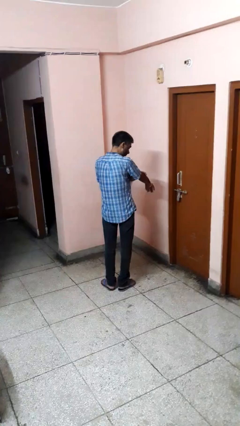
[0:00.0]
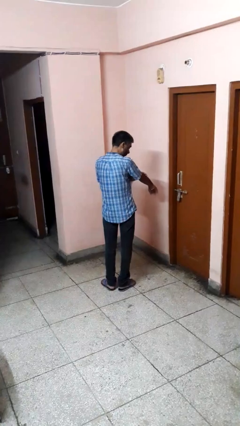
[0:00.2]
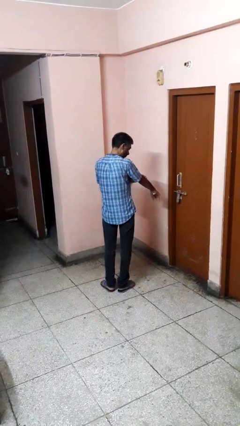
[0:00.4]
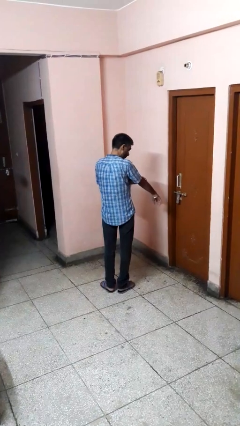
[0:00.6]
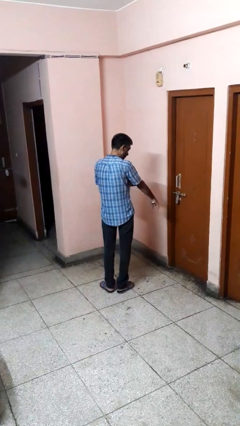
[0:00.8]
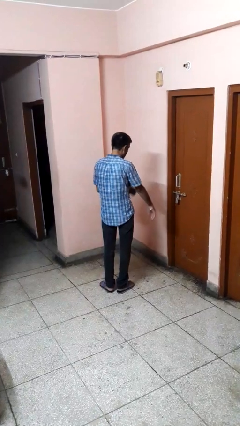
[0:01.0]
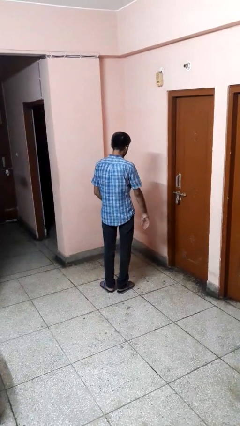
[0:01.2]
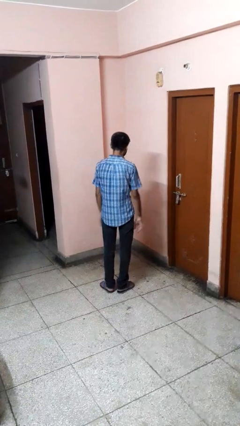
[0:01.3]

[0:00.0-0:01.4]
person swats bug

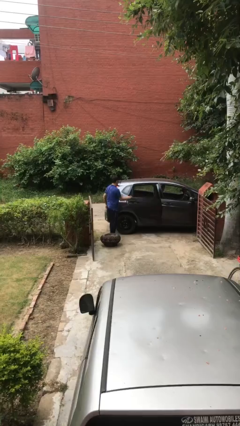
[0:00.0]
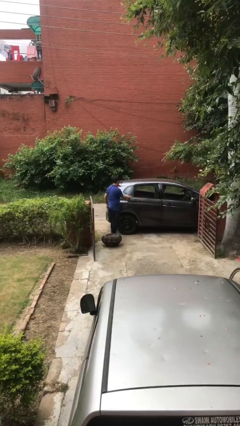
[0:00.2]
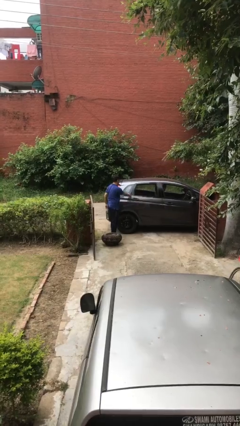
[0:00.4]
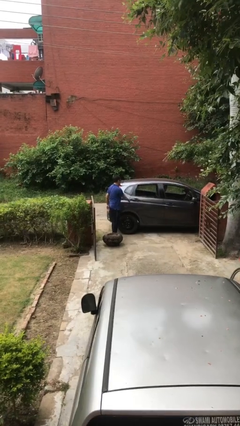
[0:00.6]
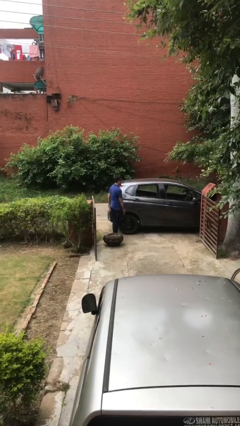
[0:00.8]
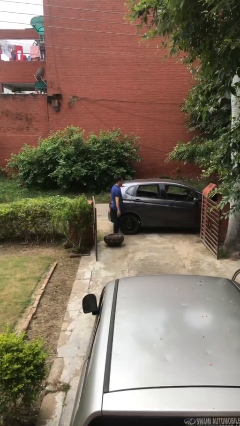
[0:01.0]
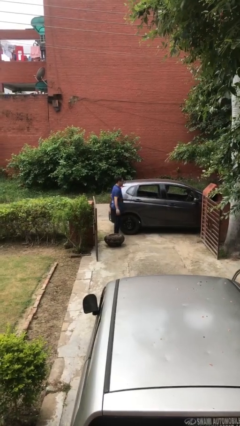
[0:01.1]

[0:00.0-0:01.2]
person closes car door

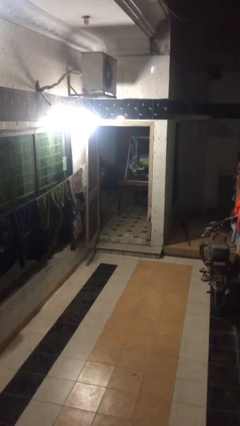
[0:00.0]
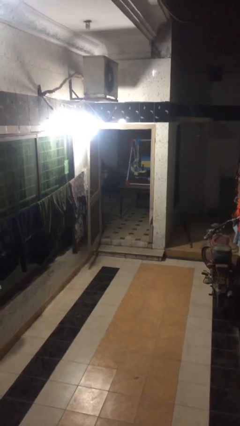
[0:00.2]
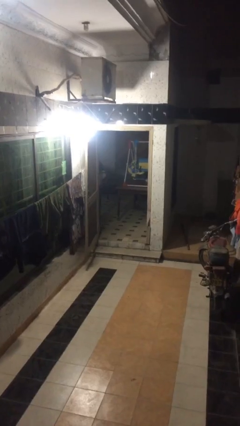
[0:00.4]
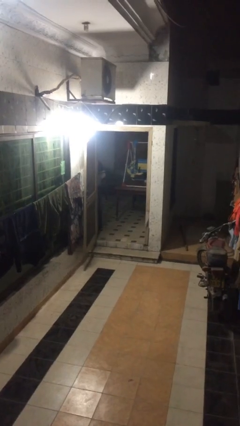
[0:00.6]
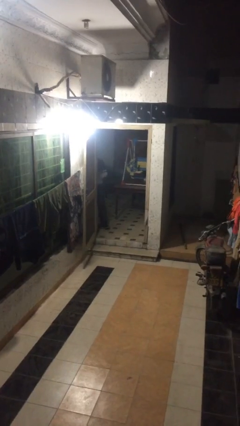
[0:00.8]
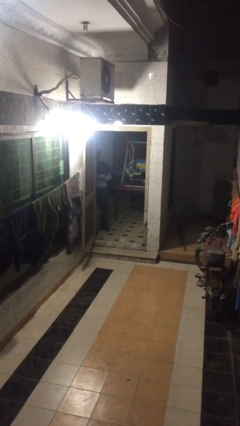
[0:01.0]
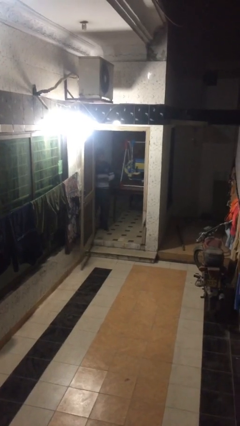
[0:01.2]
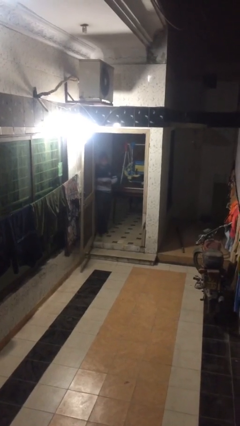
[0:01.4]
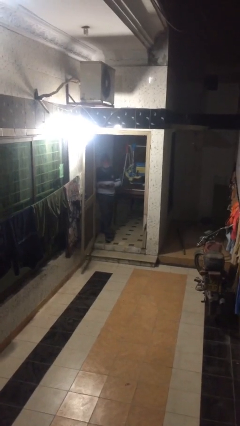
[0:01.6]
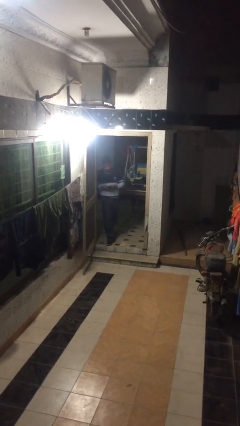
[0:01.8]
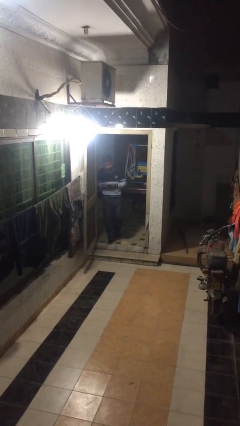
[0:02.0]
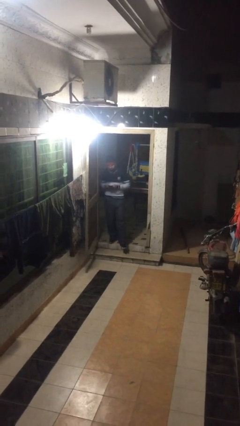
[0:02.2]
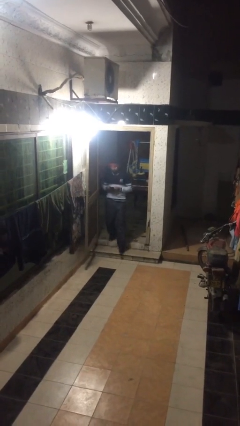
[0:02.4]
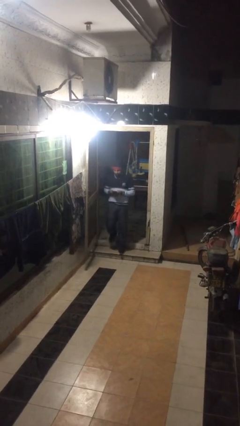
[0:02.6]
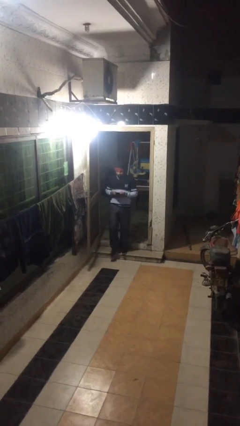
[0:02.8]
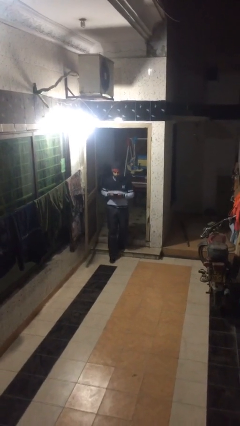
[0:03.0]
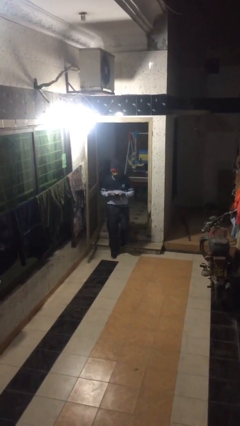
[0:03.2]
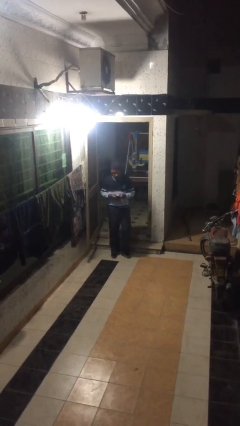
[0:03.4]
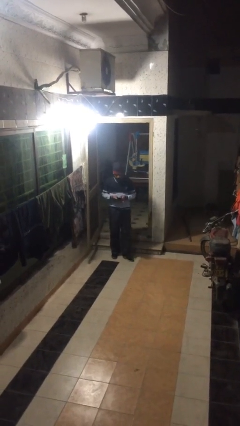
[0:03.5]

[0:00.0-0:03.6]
person enters scene through structure

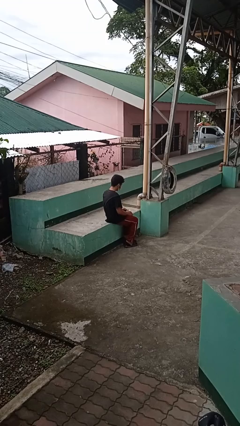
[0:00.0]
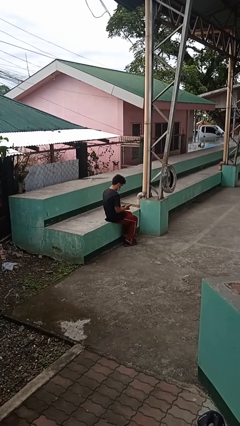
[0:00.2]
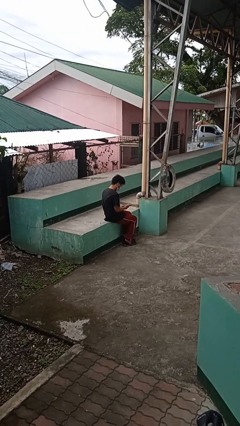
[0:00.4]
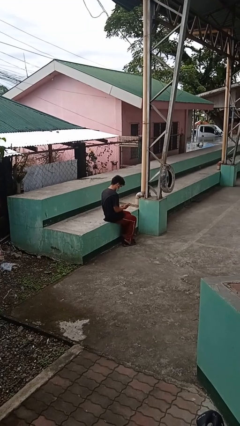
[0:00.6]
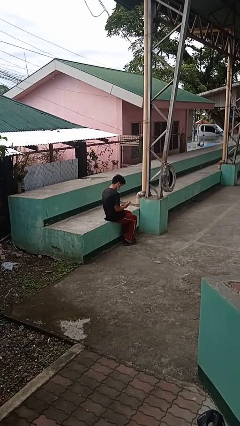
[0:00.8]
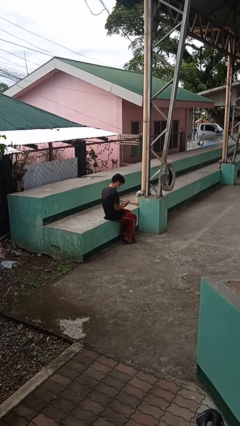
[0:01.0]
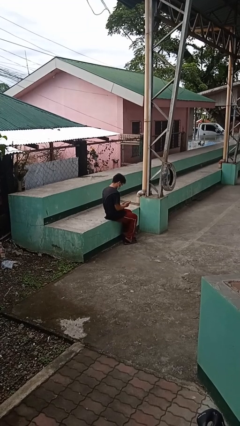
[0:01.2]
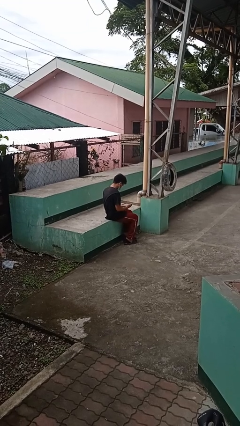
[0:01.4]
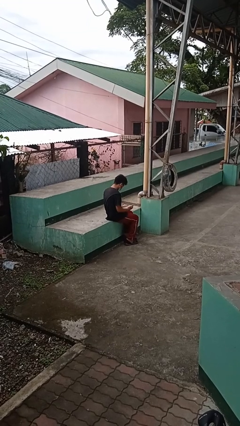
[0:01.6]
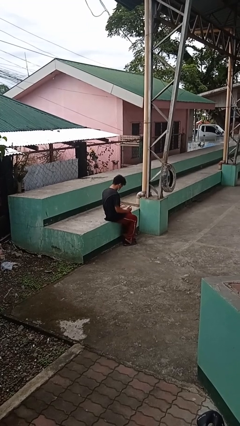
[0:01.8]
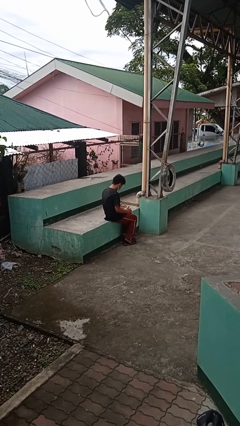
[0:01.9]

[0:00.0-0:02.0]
person looks at hands in lap

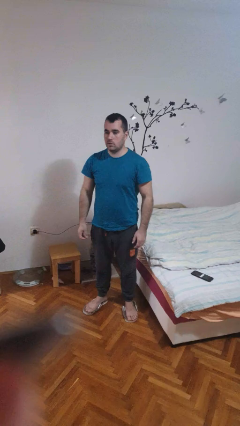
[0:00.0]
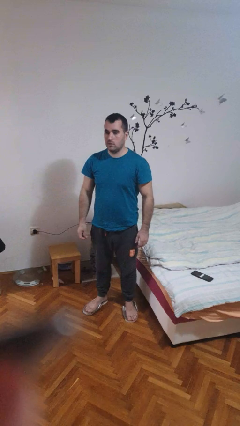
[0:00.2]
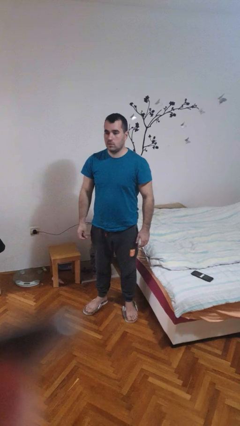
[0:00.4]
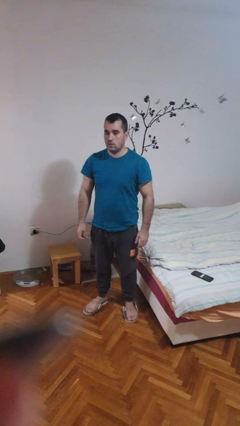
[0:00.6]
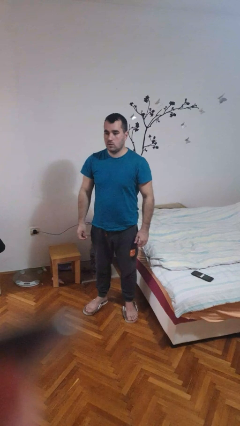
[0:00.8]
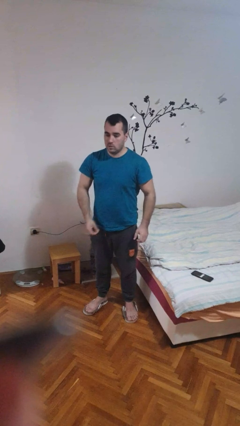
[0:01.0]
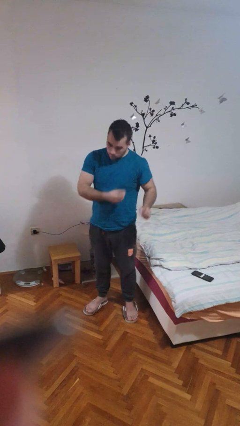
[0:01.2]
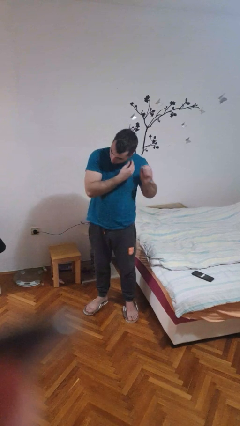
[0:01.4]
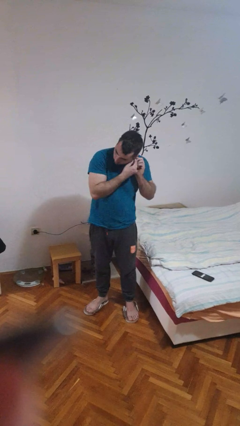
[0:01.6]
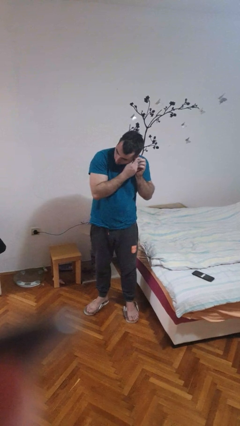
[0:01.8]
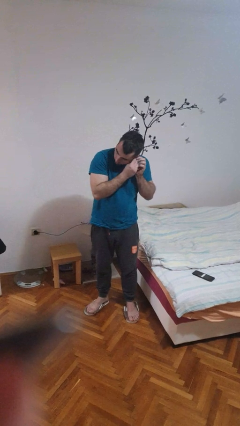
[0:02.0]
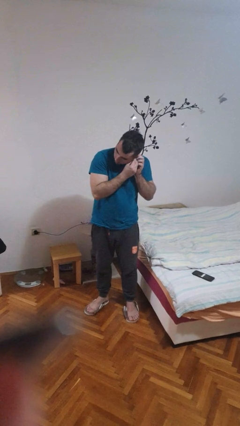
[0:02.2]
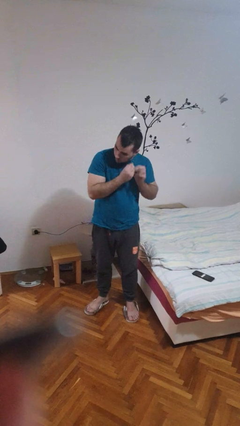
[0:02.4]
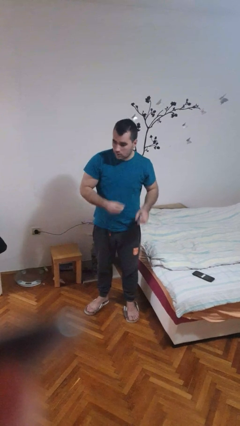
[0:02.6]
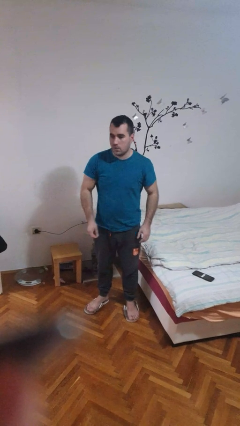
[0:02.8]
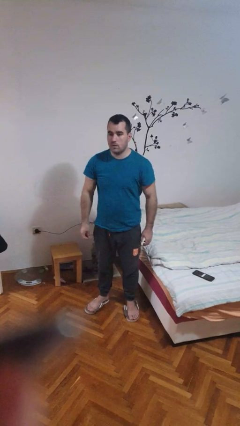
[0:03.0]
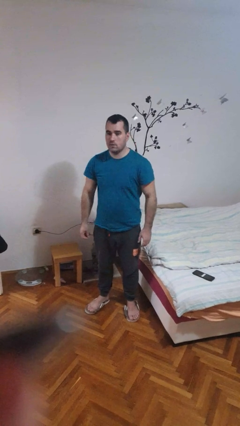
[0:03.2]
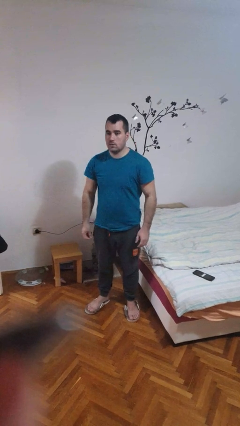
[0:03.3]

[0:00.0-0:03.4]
person takes off earrings

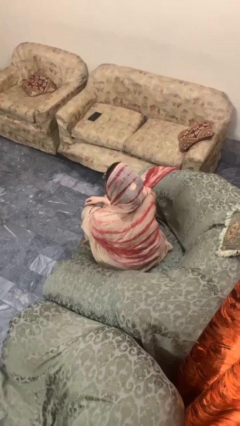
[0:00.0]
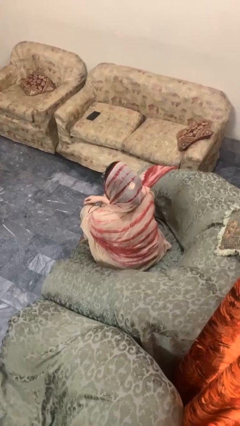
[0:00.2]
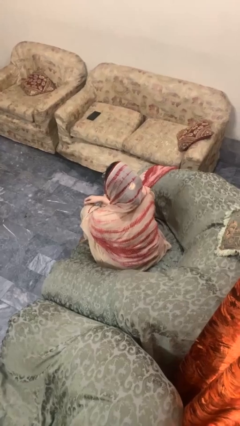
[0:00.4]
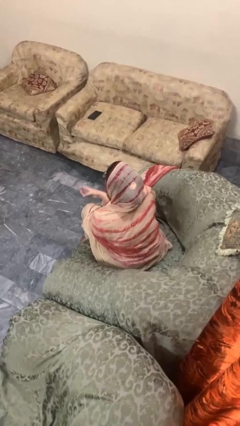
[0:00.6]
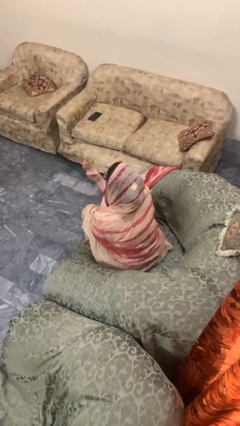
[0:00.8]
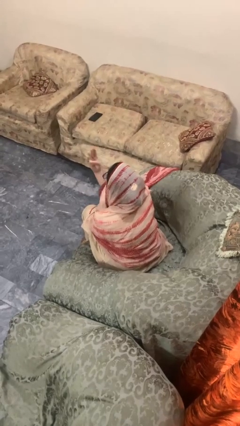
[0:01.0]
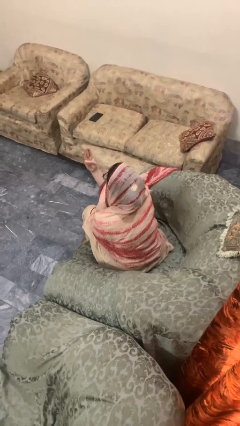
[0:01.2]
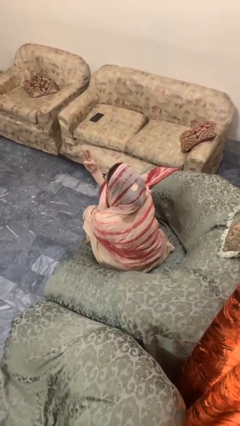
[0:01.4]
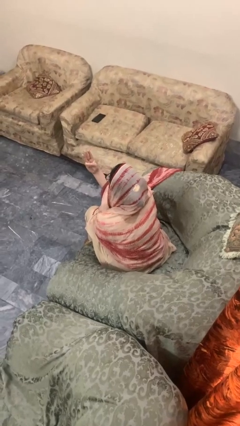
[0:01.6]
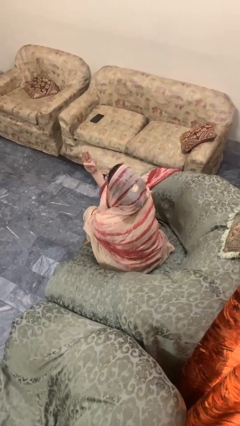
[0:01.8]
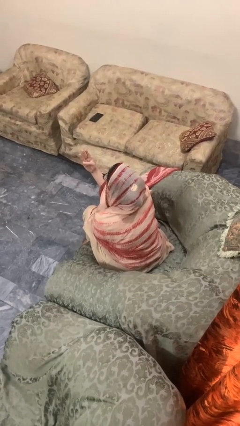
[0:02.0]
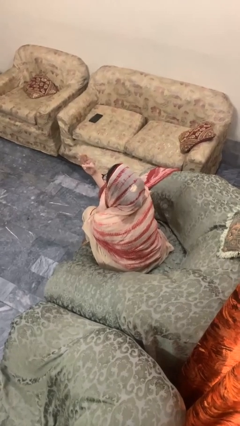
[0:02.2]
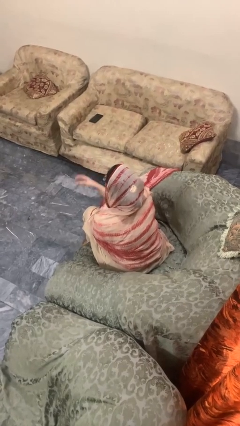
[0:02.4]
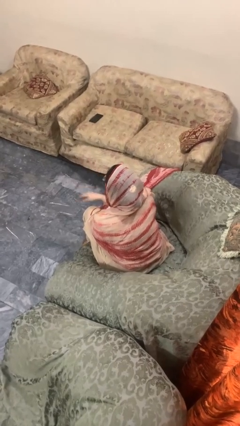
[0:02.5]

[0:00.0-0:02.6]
person gestures number three

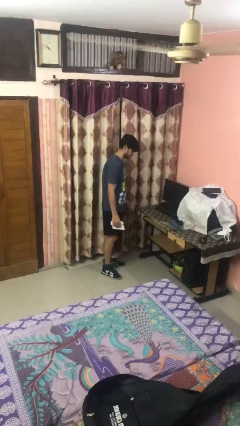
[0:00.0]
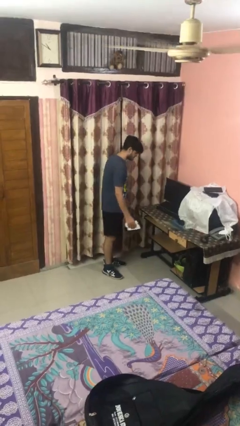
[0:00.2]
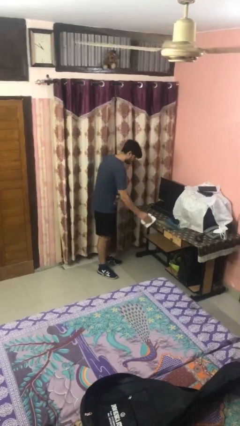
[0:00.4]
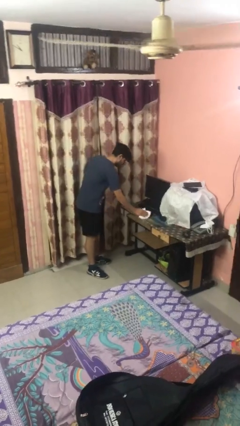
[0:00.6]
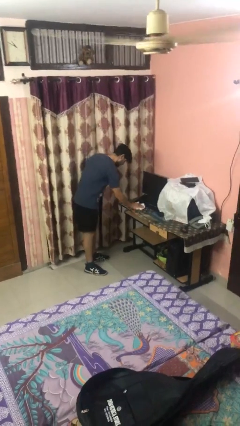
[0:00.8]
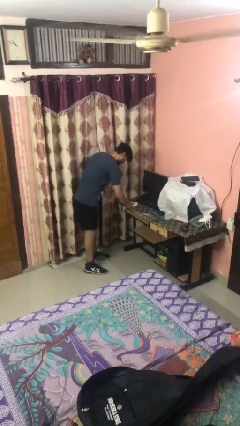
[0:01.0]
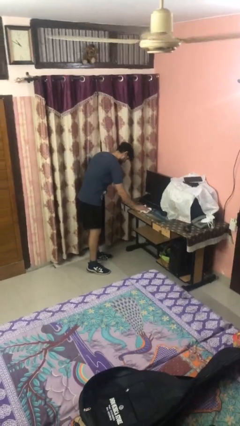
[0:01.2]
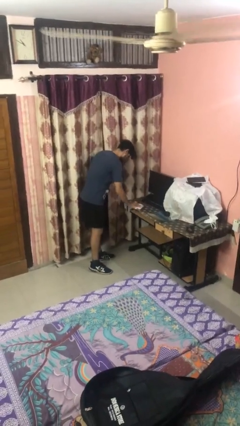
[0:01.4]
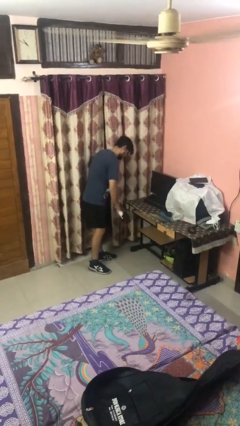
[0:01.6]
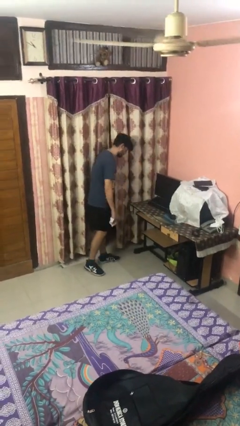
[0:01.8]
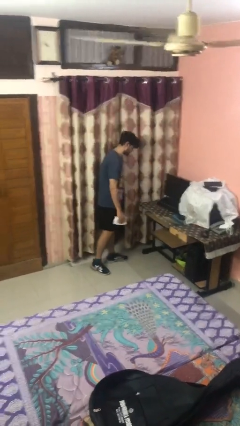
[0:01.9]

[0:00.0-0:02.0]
person cleans table with rag

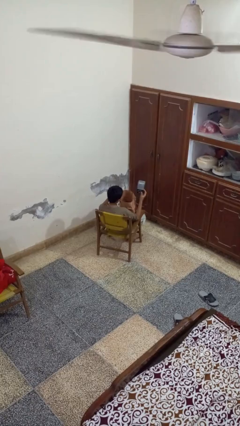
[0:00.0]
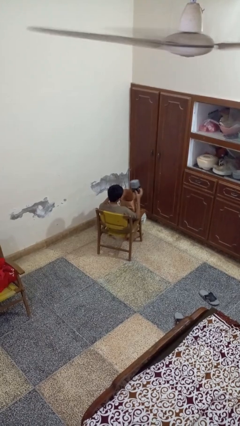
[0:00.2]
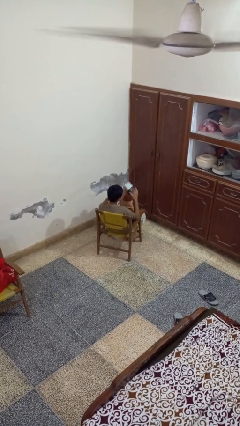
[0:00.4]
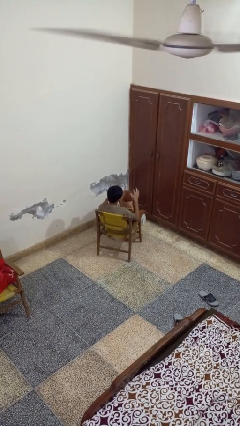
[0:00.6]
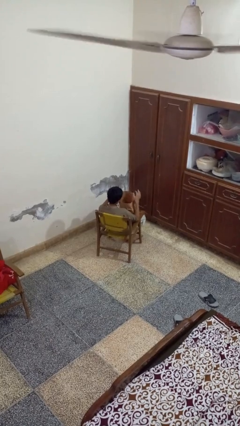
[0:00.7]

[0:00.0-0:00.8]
person puts object into bag
